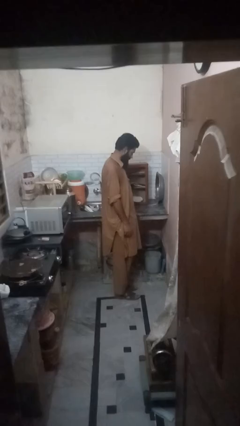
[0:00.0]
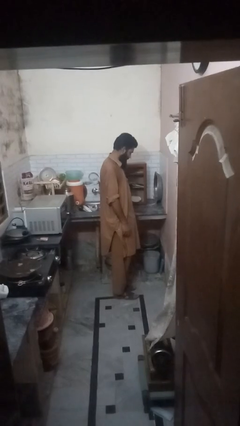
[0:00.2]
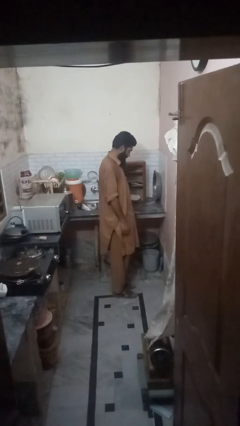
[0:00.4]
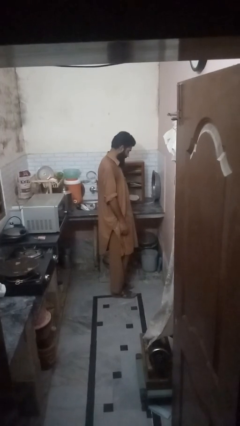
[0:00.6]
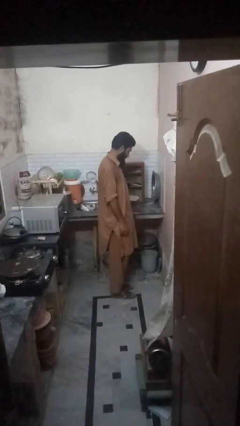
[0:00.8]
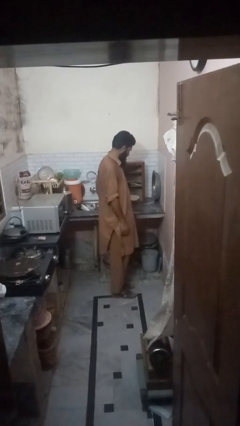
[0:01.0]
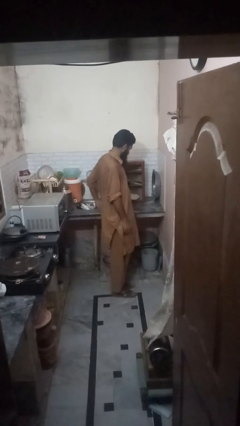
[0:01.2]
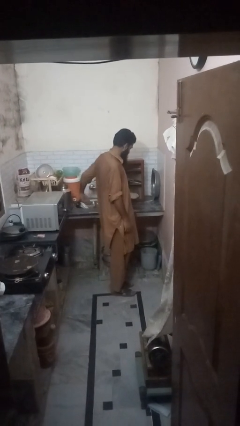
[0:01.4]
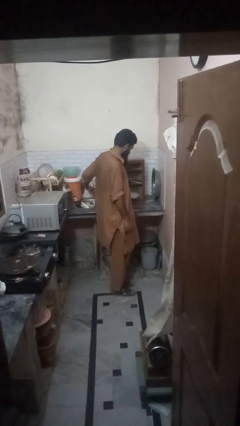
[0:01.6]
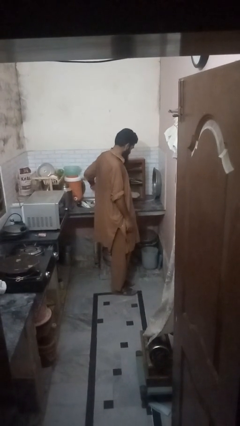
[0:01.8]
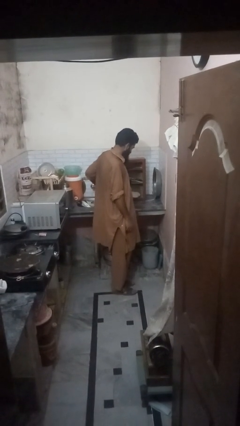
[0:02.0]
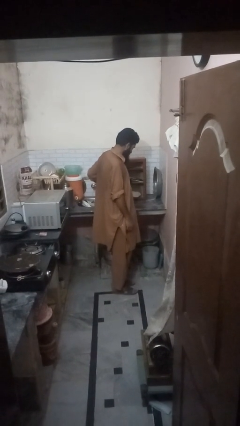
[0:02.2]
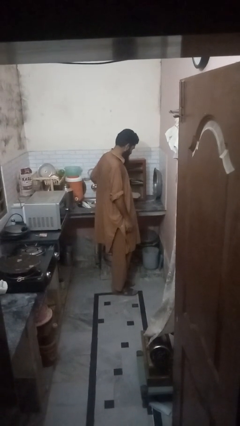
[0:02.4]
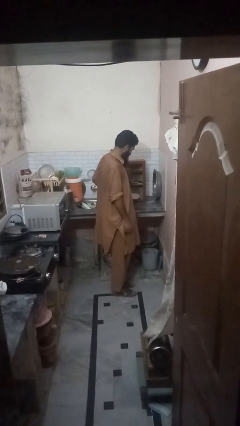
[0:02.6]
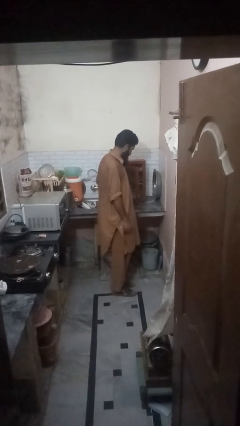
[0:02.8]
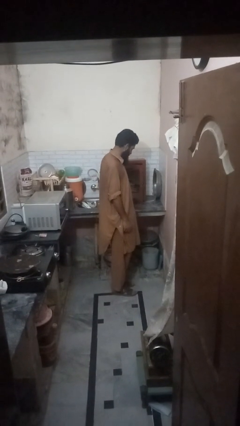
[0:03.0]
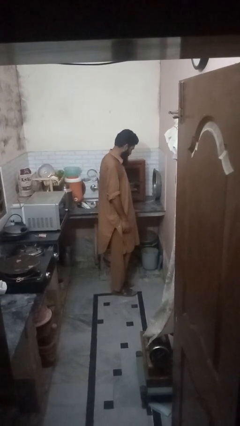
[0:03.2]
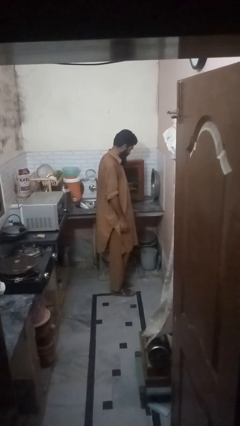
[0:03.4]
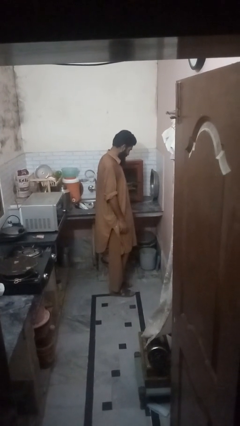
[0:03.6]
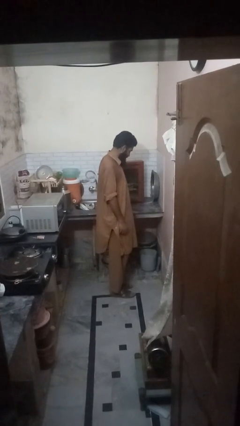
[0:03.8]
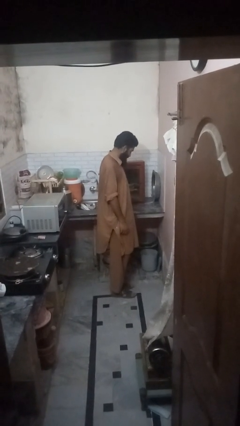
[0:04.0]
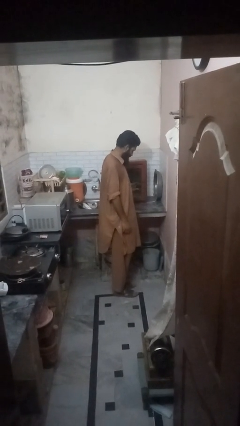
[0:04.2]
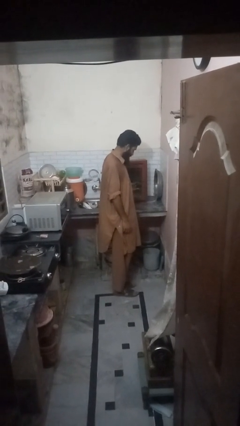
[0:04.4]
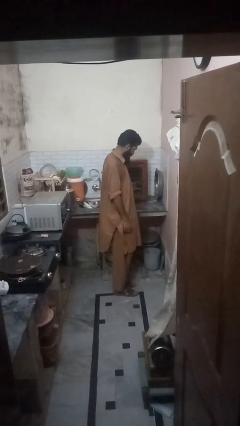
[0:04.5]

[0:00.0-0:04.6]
person closes cabinet

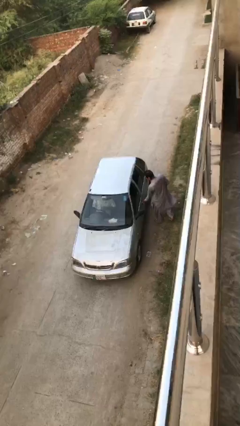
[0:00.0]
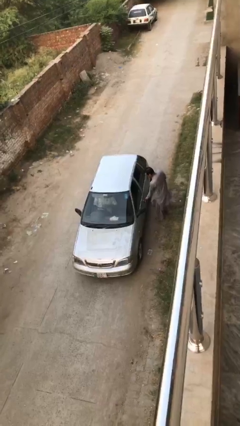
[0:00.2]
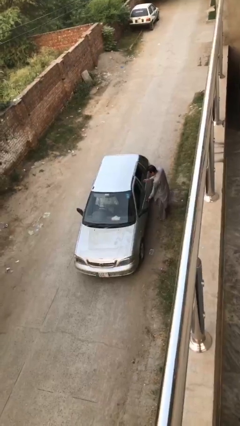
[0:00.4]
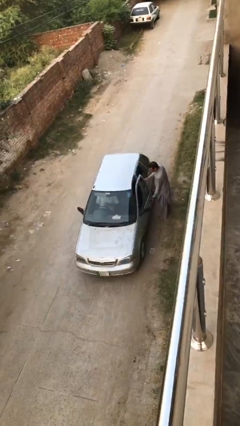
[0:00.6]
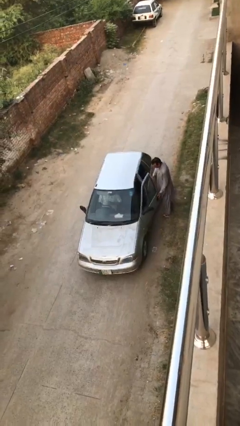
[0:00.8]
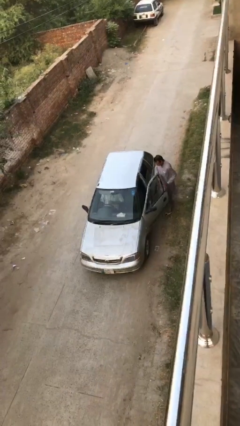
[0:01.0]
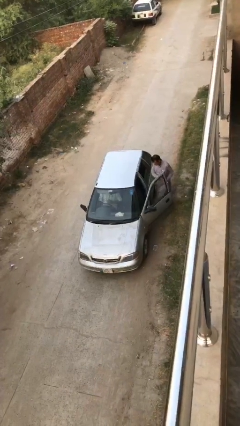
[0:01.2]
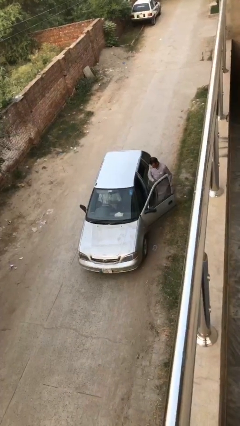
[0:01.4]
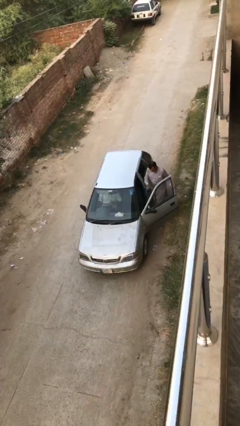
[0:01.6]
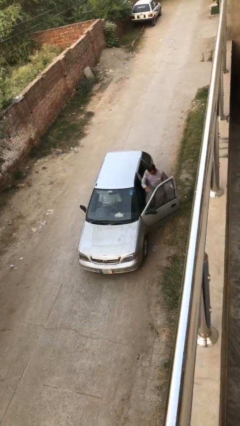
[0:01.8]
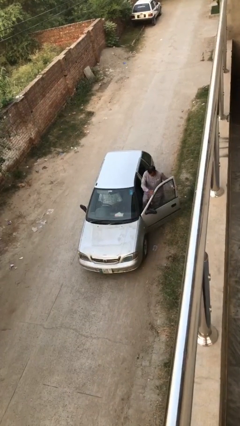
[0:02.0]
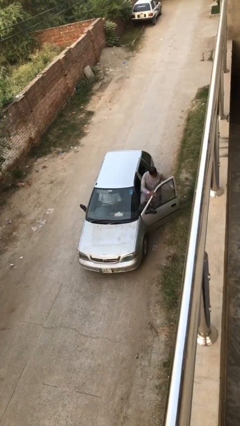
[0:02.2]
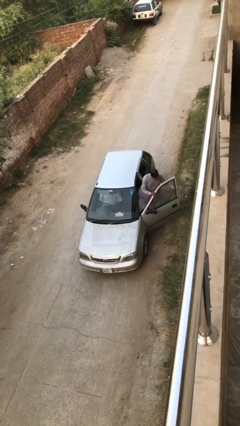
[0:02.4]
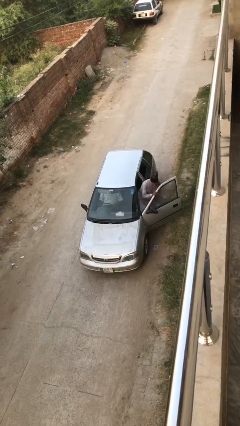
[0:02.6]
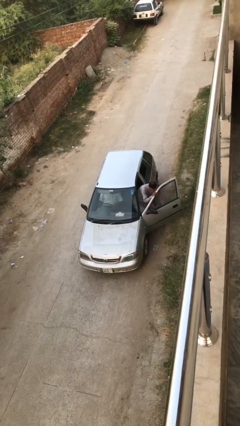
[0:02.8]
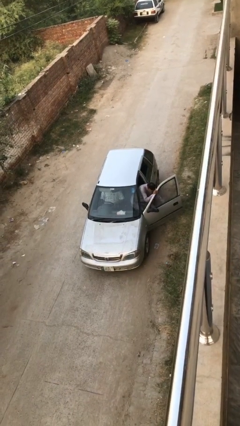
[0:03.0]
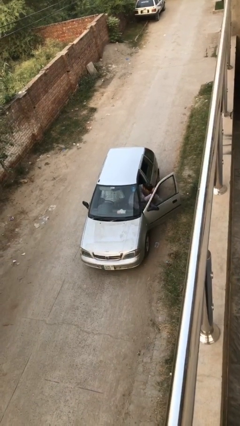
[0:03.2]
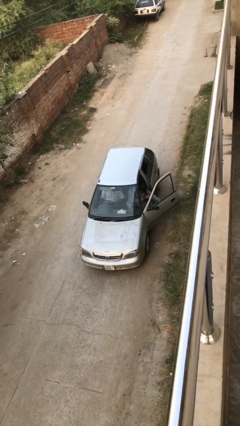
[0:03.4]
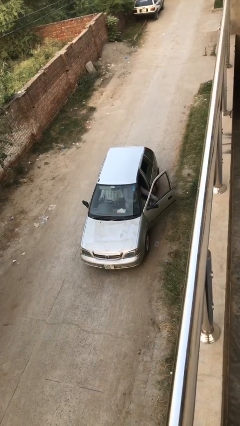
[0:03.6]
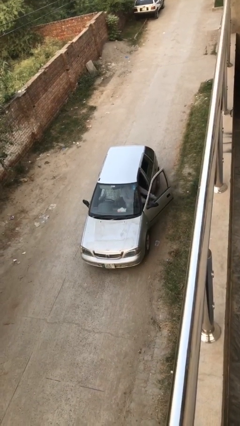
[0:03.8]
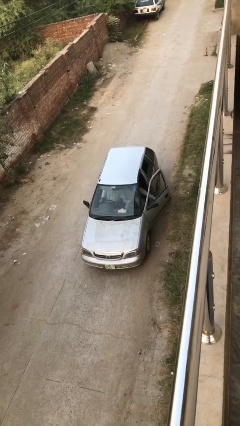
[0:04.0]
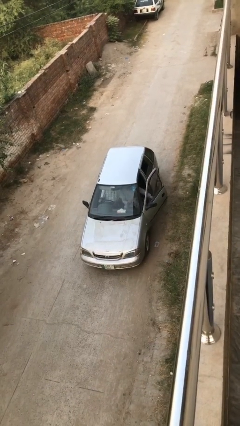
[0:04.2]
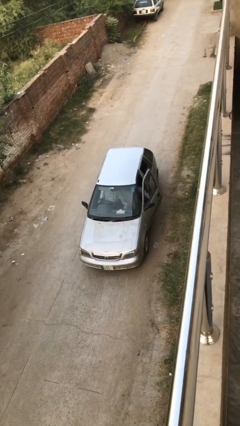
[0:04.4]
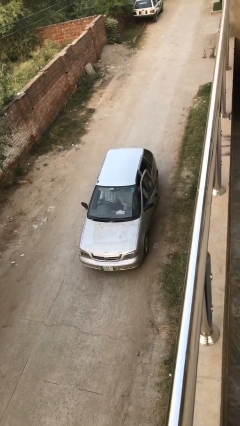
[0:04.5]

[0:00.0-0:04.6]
car picks up person

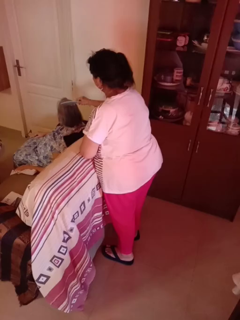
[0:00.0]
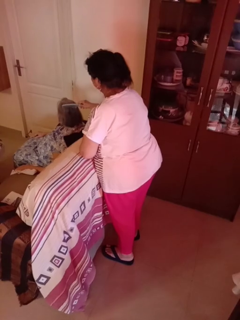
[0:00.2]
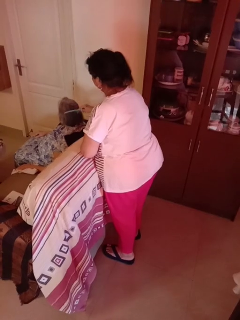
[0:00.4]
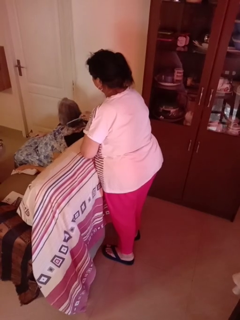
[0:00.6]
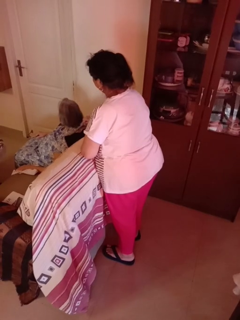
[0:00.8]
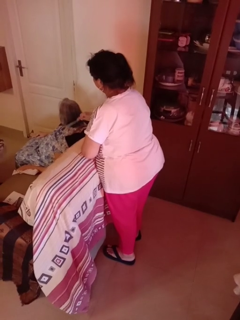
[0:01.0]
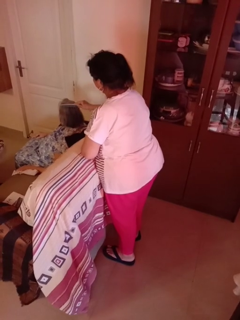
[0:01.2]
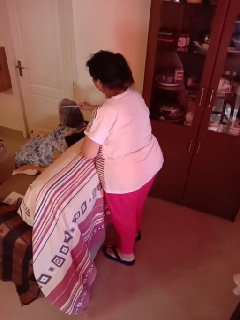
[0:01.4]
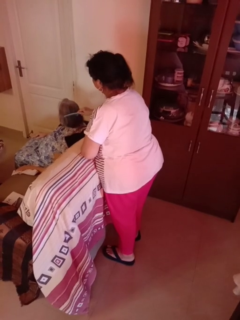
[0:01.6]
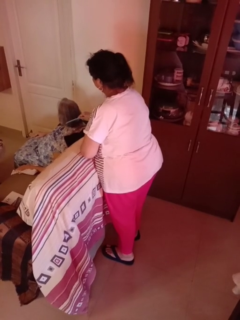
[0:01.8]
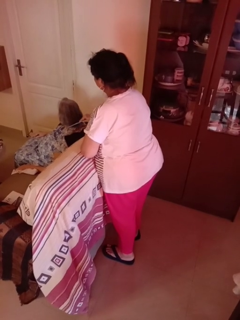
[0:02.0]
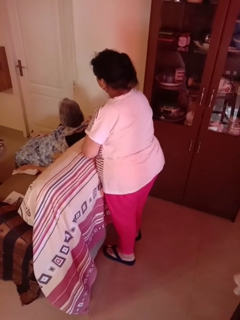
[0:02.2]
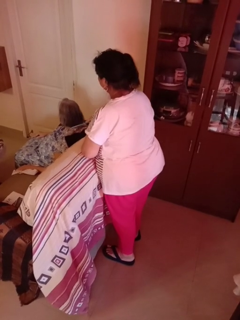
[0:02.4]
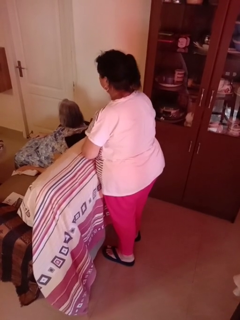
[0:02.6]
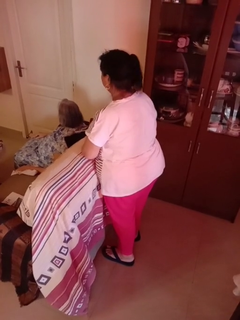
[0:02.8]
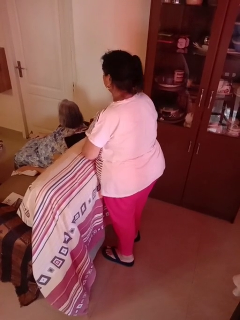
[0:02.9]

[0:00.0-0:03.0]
person brushes hair of person

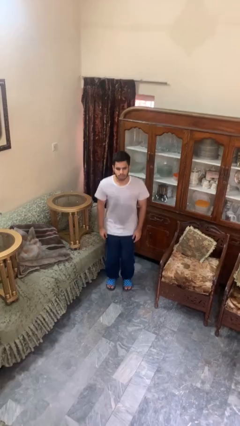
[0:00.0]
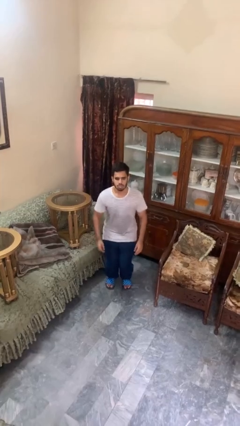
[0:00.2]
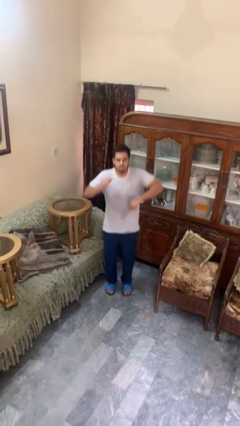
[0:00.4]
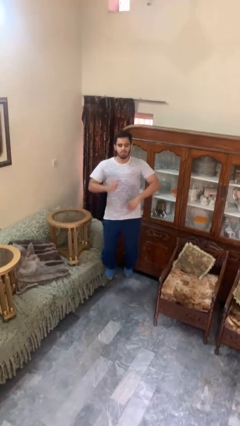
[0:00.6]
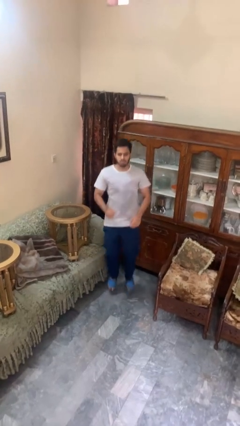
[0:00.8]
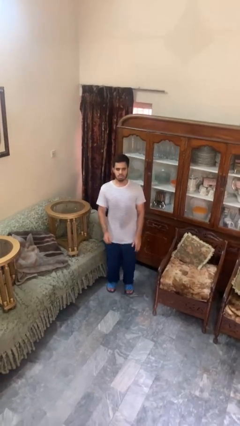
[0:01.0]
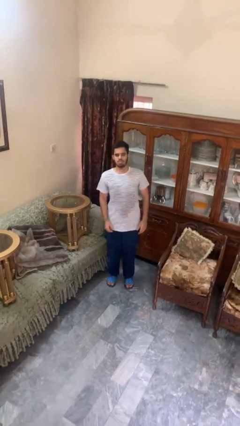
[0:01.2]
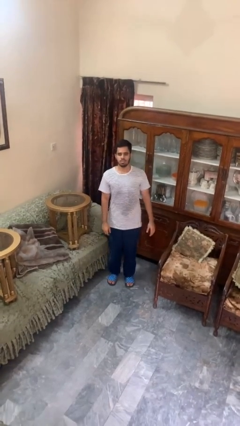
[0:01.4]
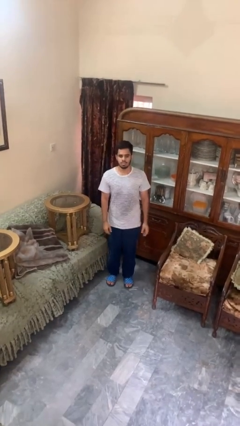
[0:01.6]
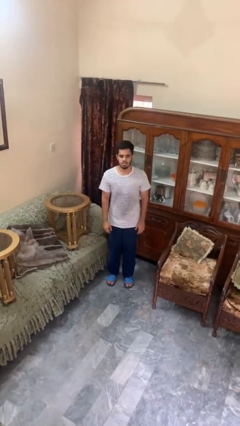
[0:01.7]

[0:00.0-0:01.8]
person jumps

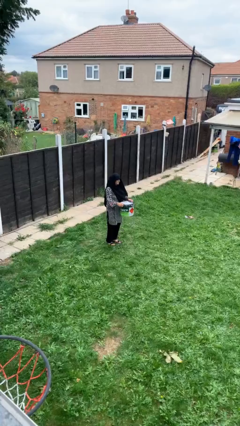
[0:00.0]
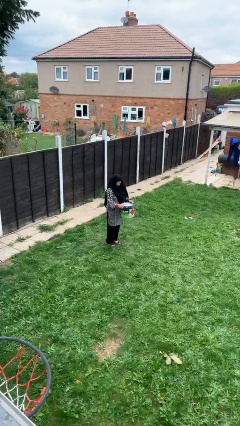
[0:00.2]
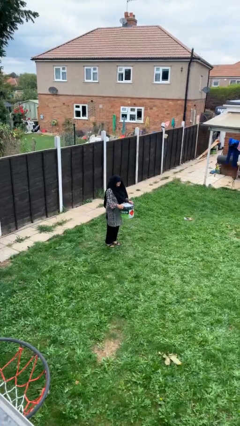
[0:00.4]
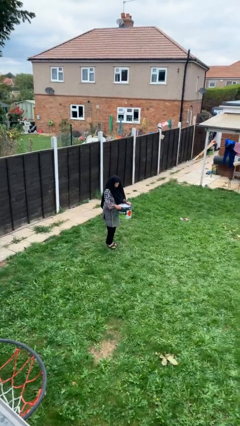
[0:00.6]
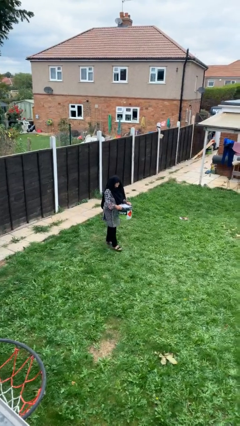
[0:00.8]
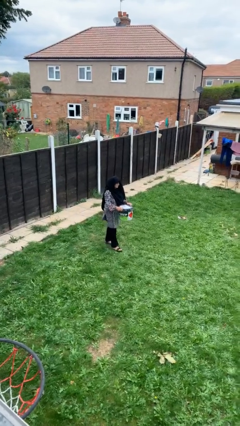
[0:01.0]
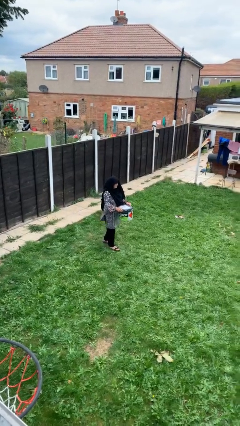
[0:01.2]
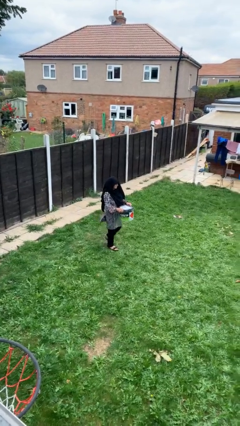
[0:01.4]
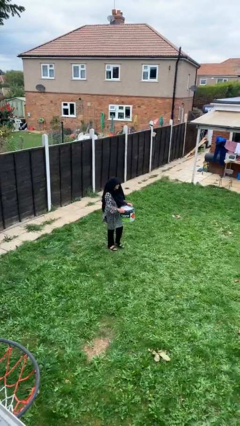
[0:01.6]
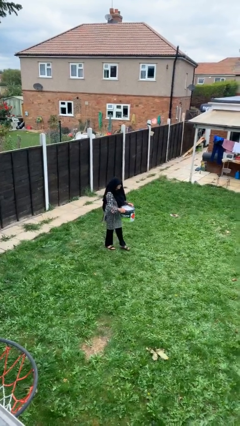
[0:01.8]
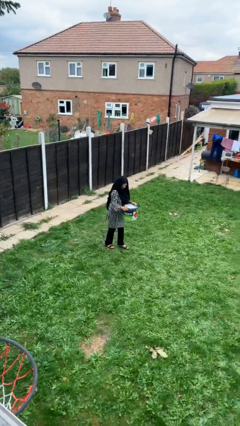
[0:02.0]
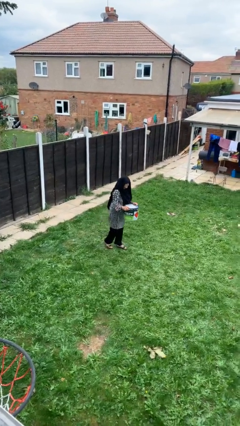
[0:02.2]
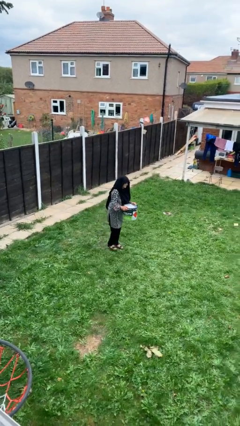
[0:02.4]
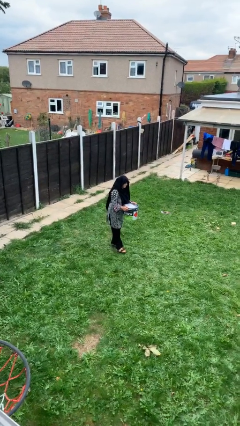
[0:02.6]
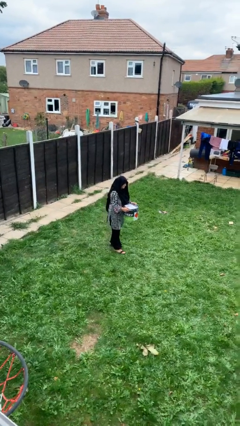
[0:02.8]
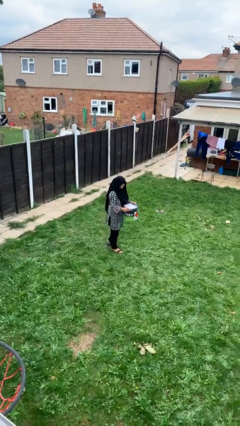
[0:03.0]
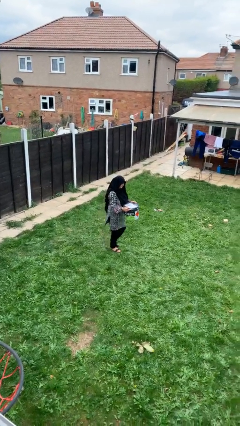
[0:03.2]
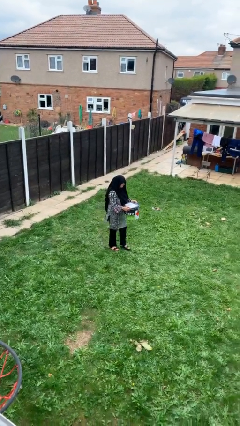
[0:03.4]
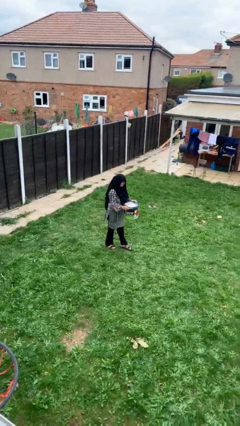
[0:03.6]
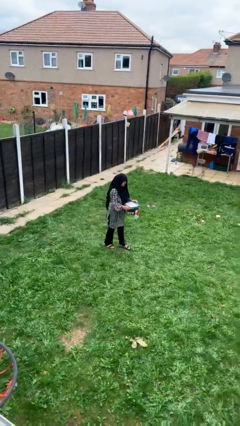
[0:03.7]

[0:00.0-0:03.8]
person carries heavy object

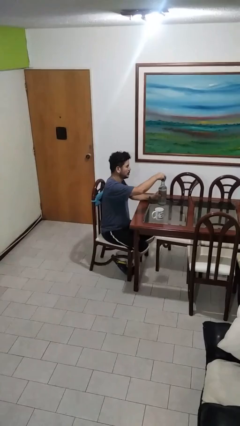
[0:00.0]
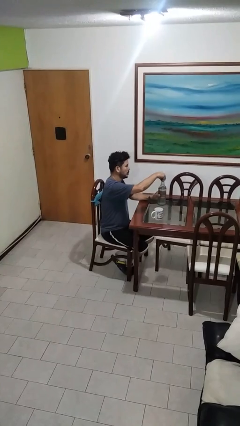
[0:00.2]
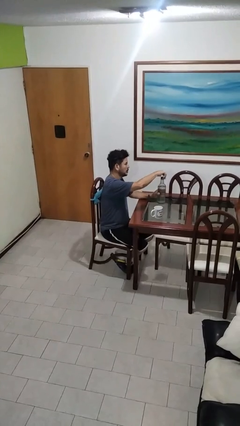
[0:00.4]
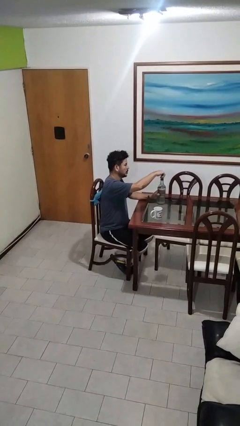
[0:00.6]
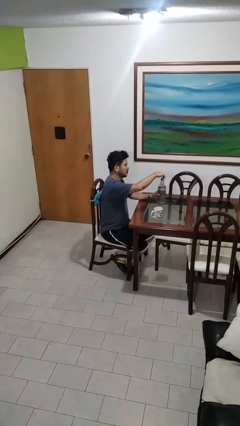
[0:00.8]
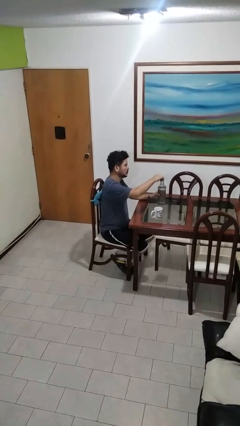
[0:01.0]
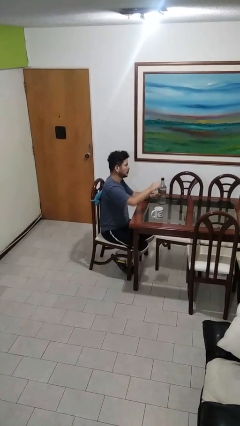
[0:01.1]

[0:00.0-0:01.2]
person screws lid to bottle
